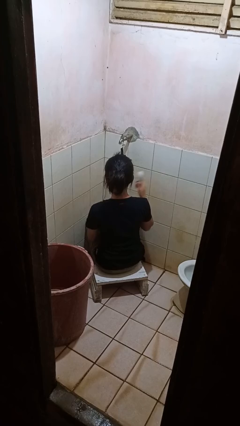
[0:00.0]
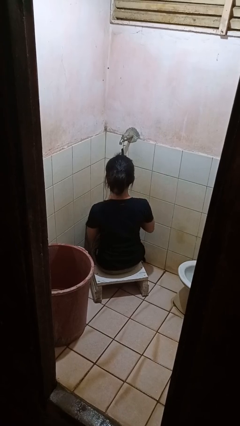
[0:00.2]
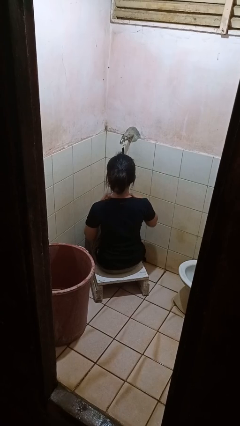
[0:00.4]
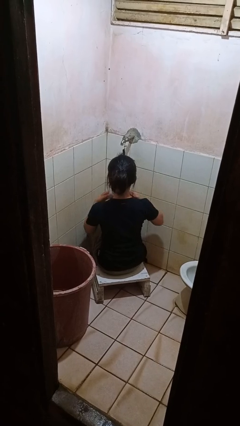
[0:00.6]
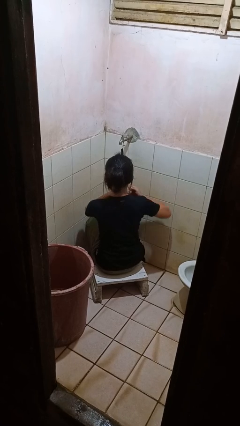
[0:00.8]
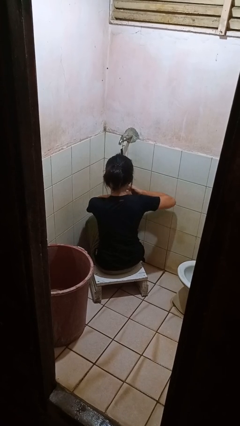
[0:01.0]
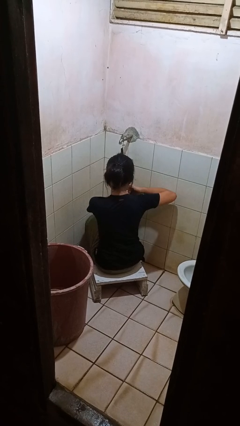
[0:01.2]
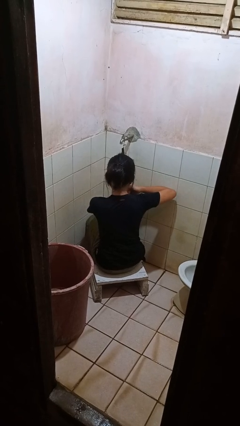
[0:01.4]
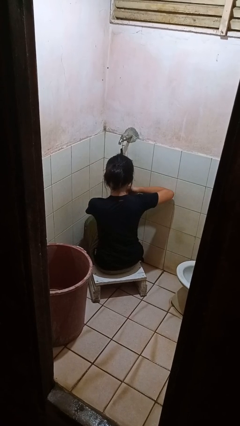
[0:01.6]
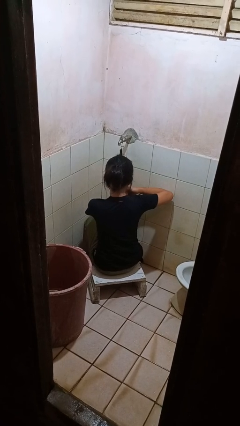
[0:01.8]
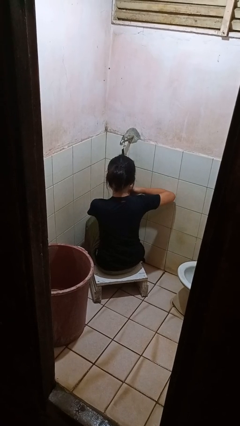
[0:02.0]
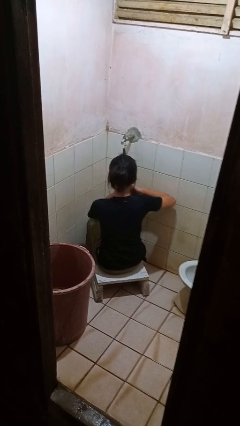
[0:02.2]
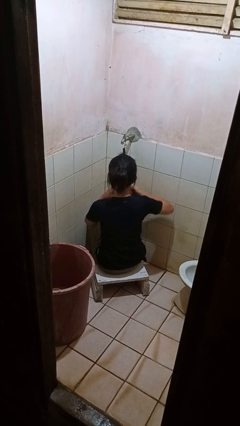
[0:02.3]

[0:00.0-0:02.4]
person applies deodorant

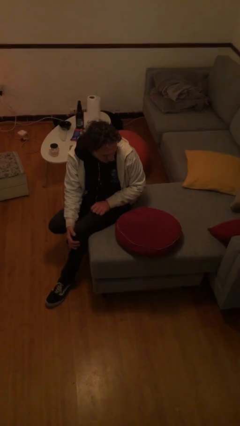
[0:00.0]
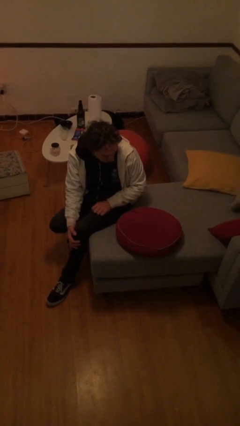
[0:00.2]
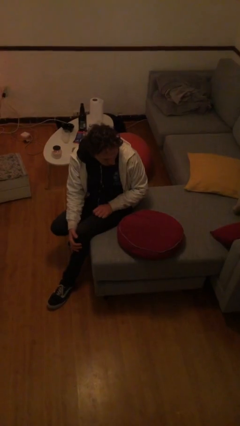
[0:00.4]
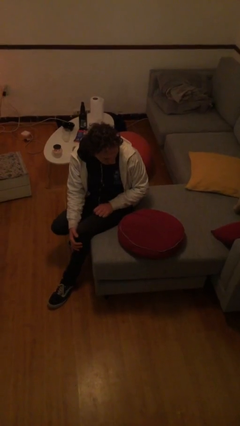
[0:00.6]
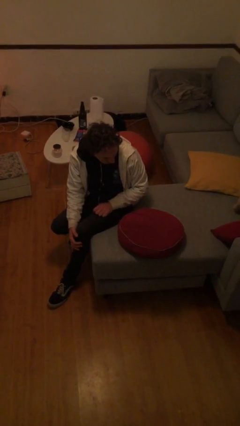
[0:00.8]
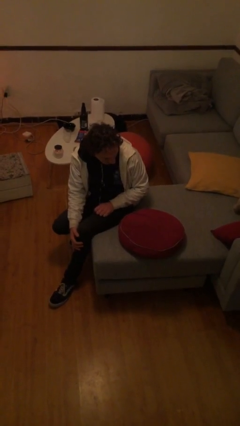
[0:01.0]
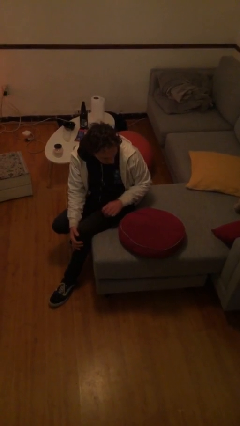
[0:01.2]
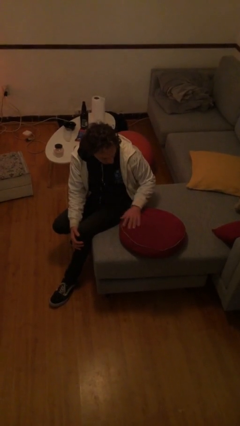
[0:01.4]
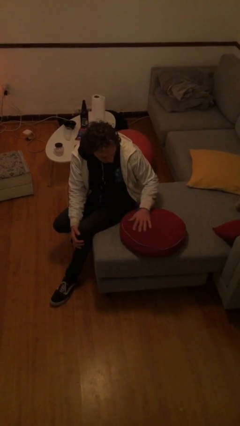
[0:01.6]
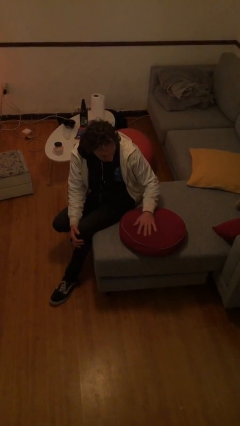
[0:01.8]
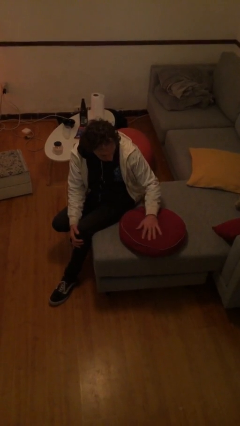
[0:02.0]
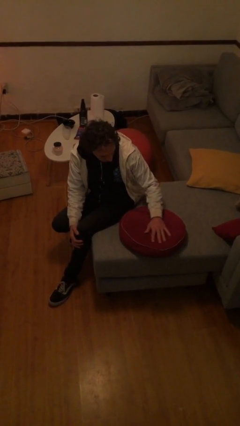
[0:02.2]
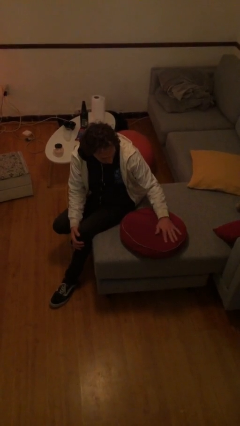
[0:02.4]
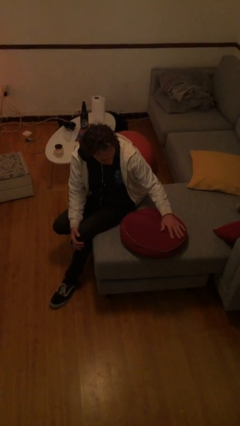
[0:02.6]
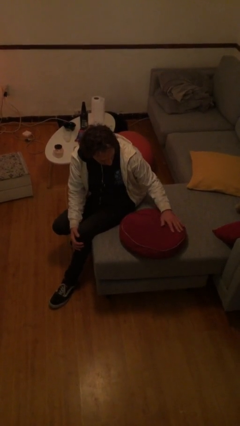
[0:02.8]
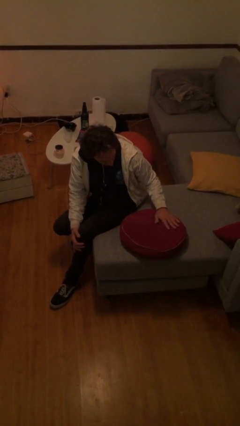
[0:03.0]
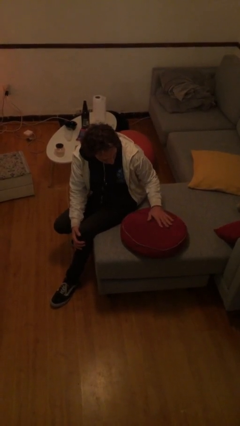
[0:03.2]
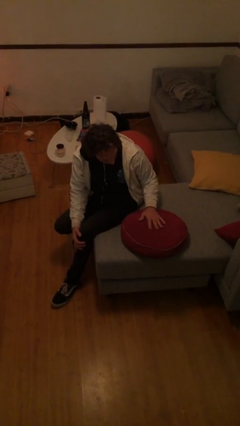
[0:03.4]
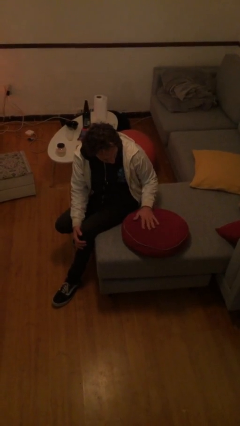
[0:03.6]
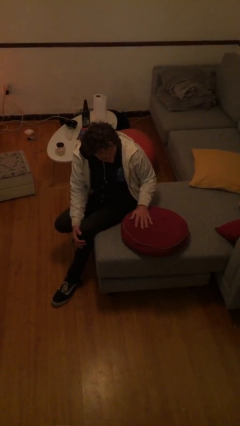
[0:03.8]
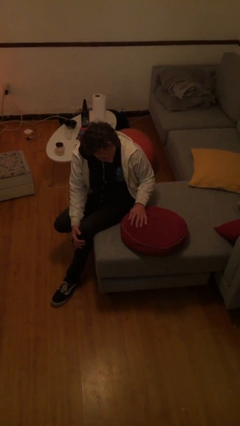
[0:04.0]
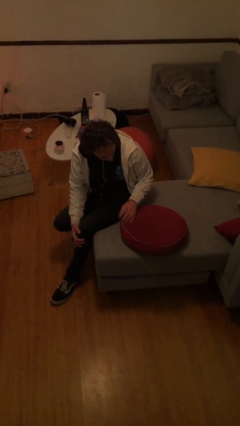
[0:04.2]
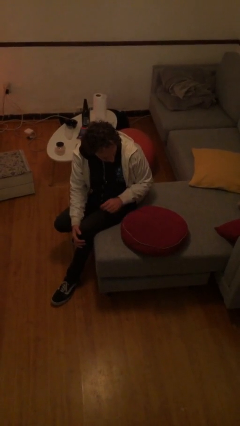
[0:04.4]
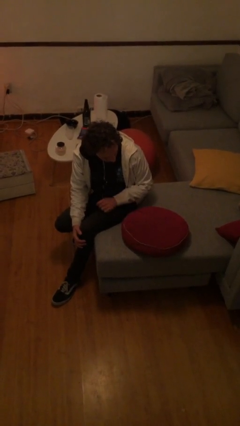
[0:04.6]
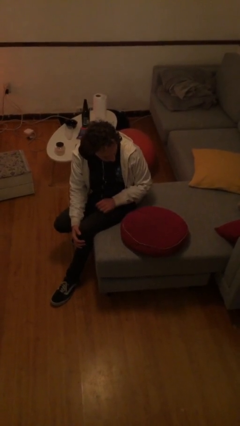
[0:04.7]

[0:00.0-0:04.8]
person waves hand over object

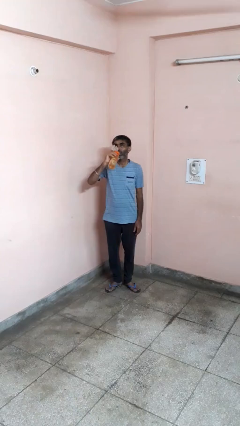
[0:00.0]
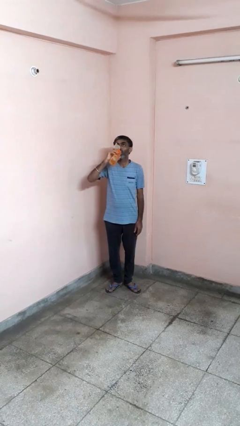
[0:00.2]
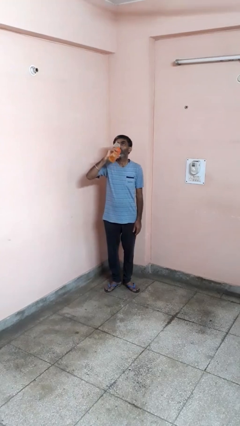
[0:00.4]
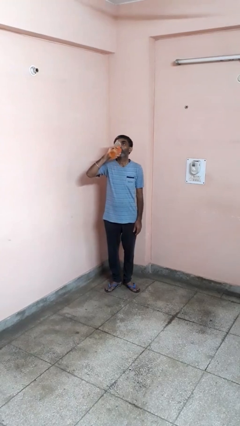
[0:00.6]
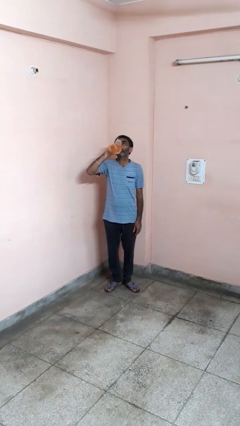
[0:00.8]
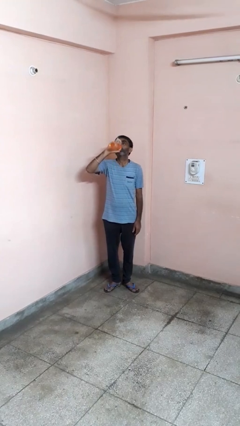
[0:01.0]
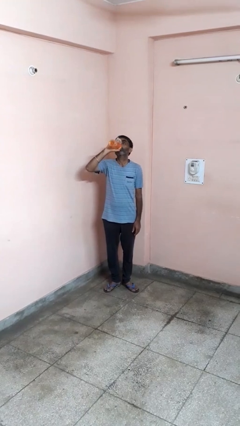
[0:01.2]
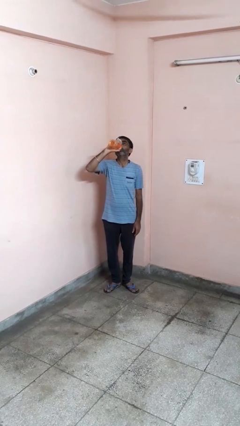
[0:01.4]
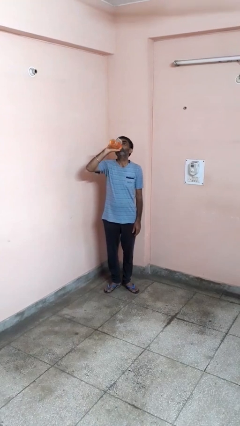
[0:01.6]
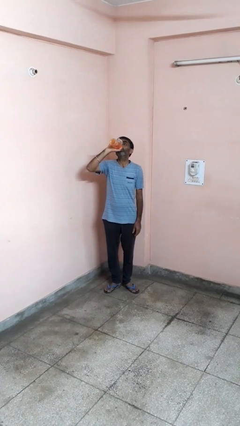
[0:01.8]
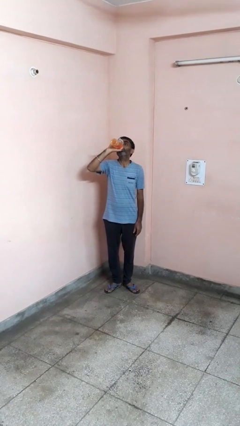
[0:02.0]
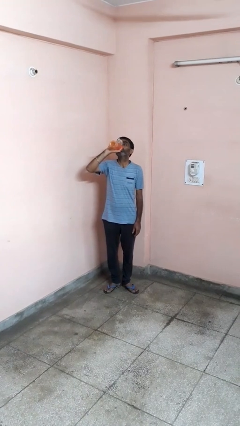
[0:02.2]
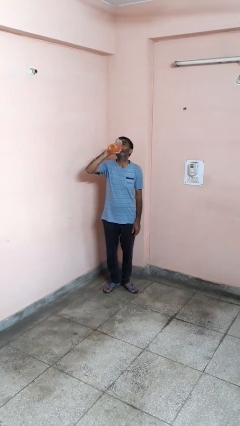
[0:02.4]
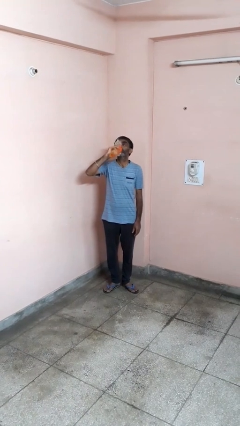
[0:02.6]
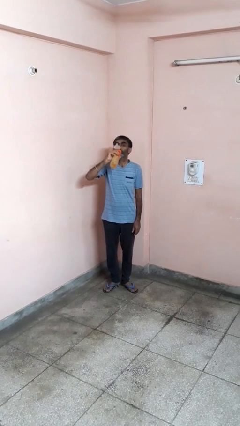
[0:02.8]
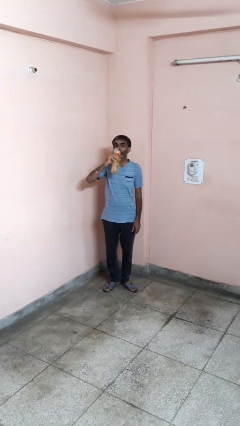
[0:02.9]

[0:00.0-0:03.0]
person drinks from bottle

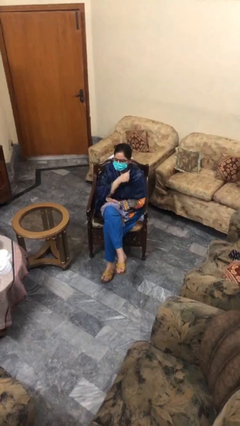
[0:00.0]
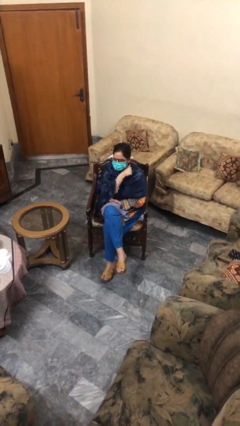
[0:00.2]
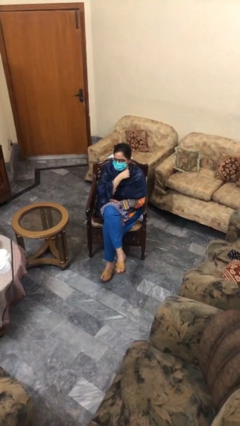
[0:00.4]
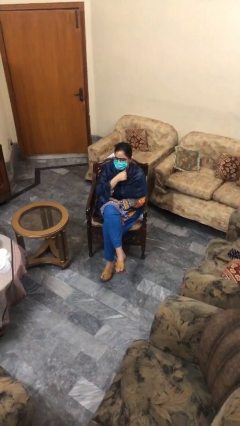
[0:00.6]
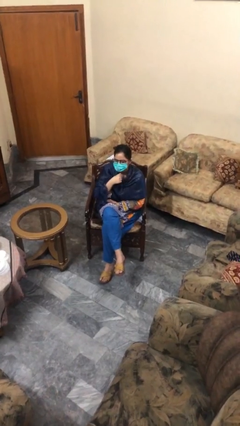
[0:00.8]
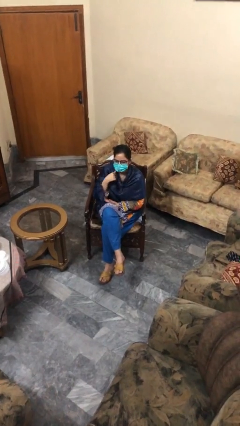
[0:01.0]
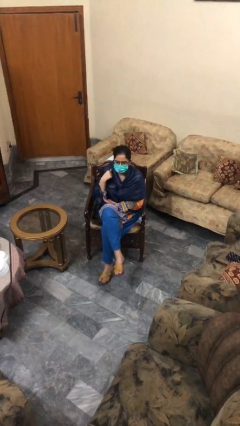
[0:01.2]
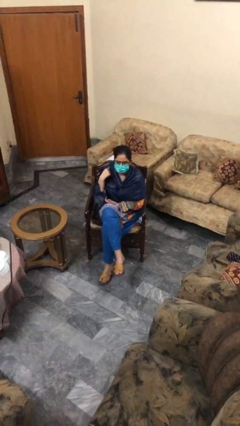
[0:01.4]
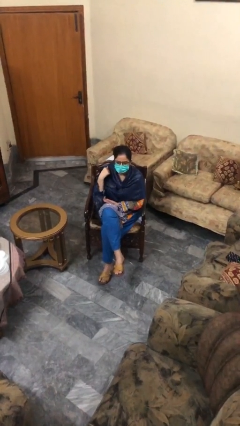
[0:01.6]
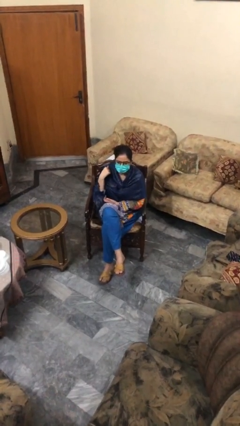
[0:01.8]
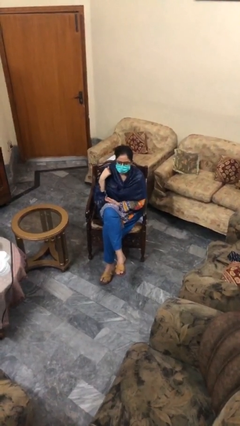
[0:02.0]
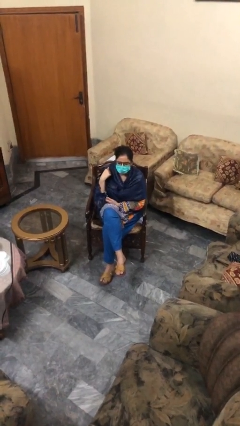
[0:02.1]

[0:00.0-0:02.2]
person gestures cut

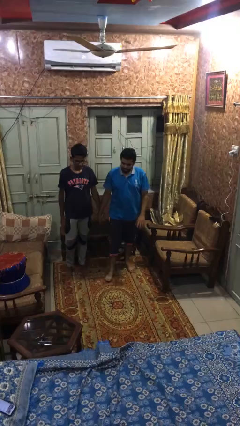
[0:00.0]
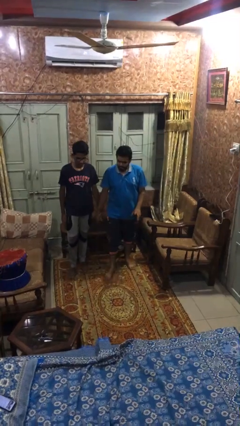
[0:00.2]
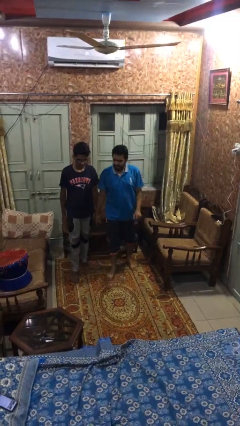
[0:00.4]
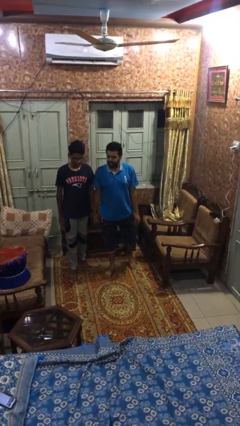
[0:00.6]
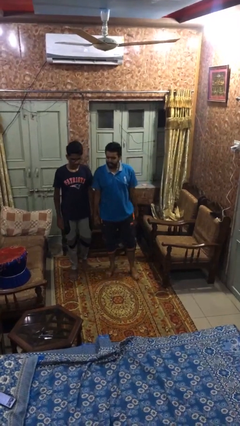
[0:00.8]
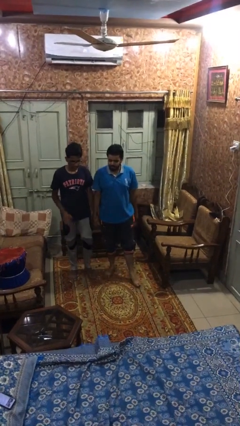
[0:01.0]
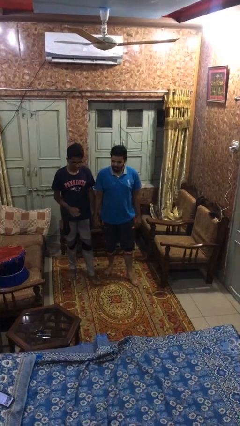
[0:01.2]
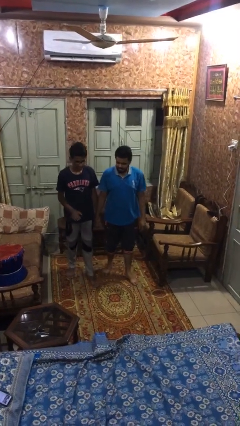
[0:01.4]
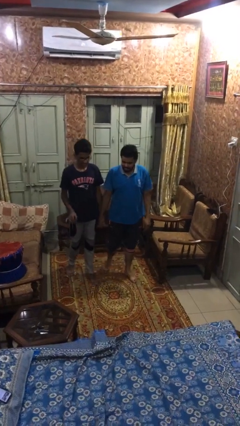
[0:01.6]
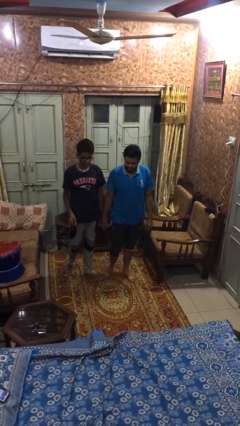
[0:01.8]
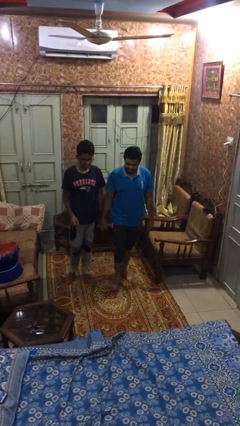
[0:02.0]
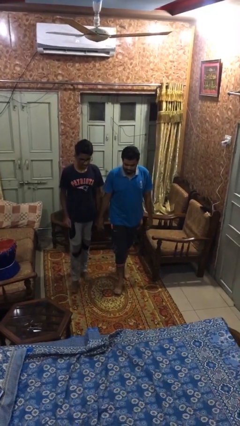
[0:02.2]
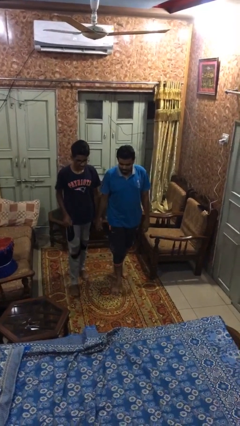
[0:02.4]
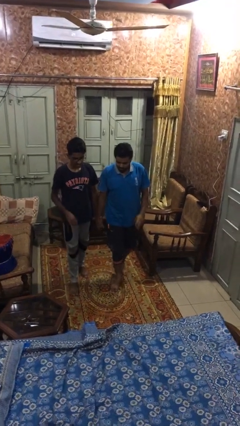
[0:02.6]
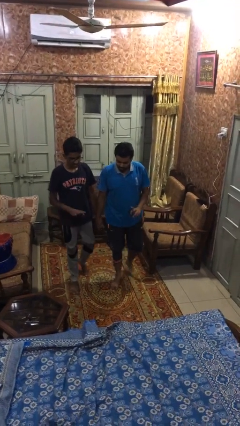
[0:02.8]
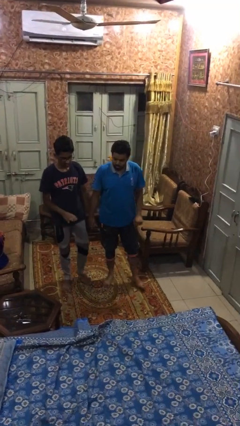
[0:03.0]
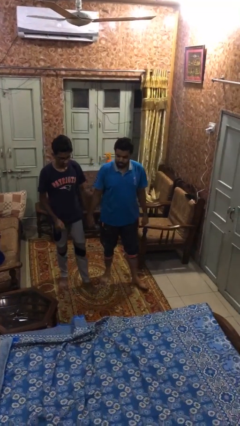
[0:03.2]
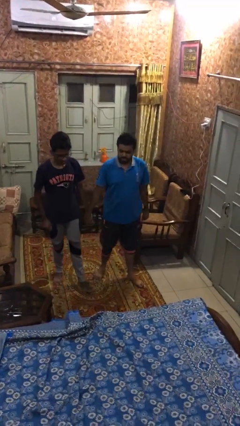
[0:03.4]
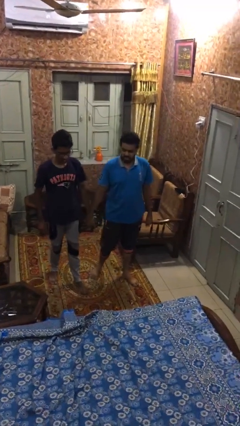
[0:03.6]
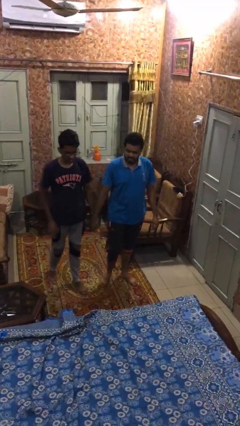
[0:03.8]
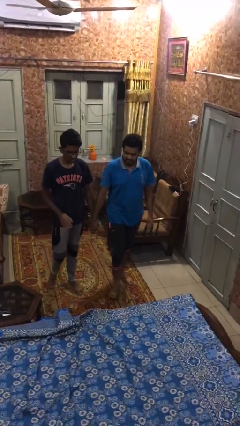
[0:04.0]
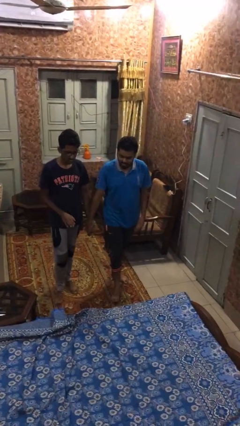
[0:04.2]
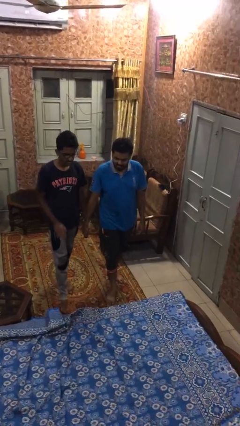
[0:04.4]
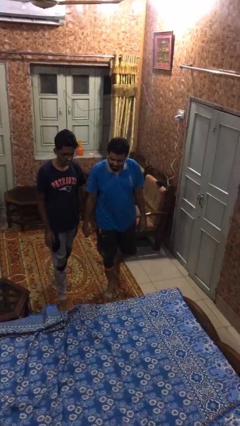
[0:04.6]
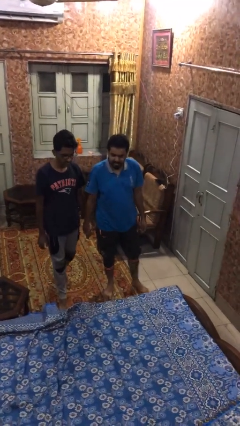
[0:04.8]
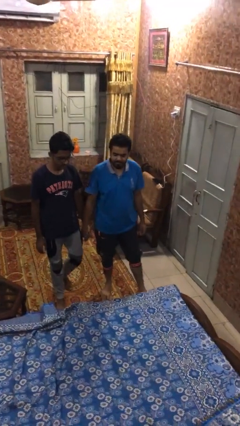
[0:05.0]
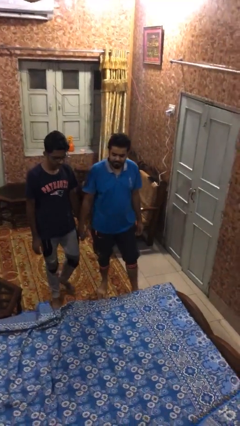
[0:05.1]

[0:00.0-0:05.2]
person holds hand
